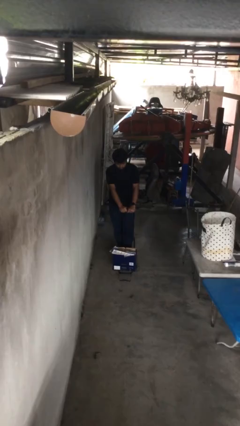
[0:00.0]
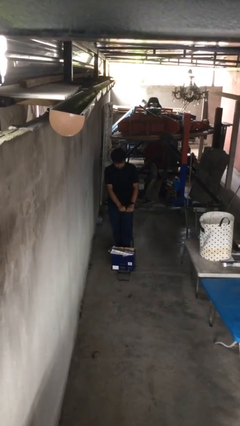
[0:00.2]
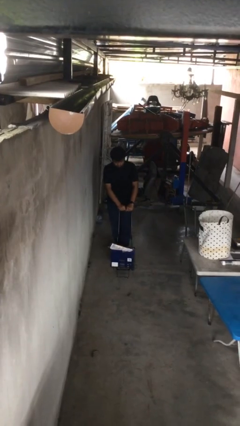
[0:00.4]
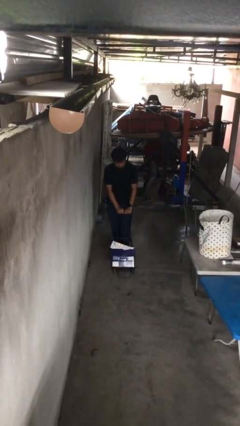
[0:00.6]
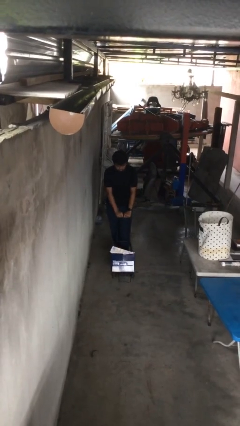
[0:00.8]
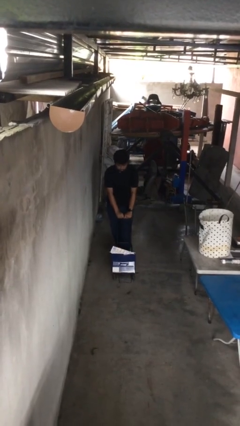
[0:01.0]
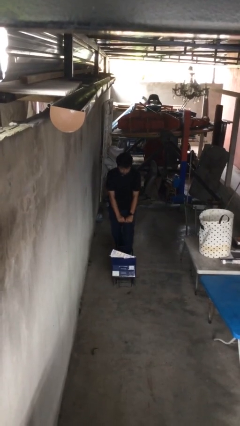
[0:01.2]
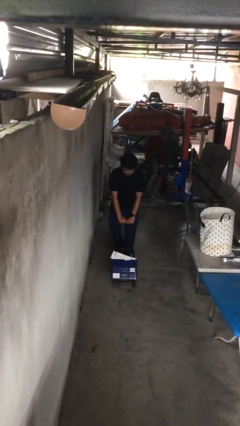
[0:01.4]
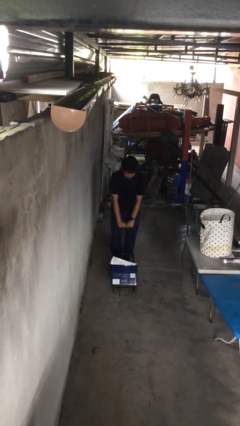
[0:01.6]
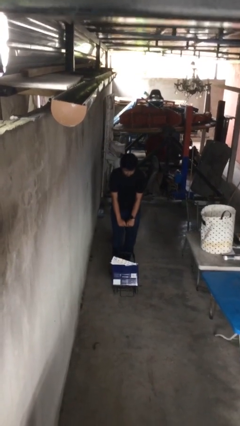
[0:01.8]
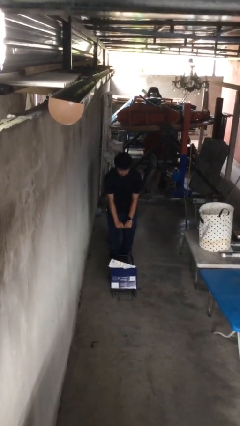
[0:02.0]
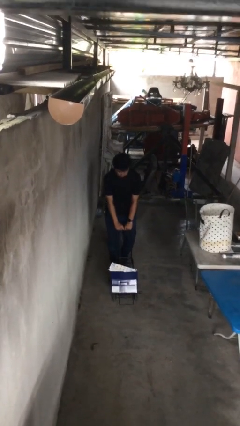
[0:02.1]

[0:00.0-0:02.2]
person pushes wheeled cart

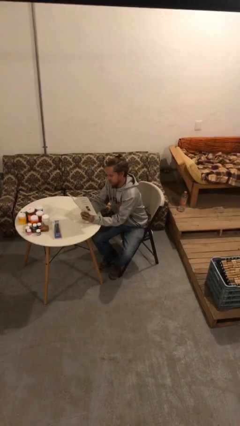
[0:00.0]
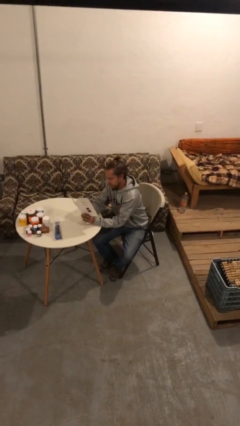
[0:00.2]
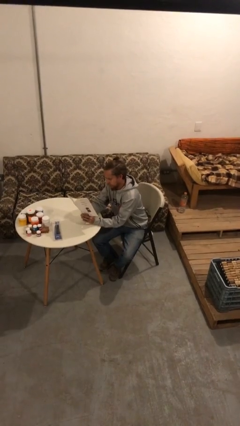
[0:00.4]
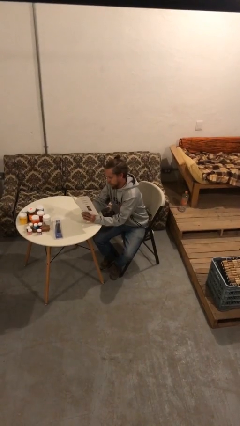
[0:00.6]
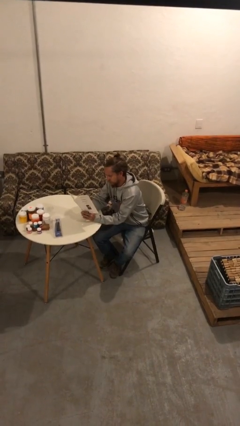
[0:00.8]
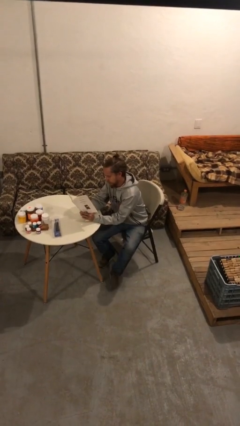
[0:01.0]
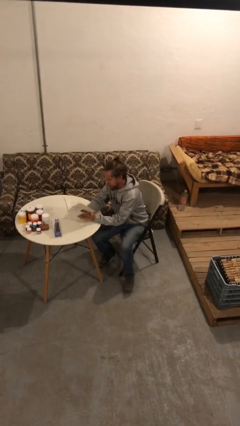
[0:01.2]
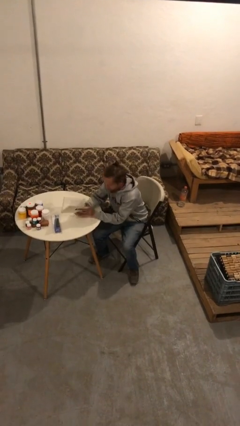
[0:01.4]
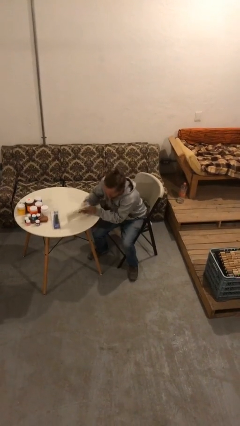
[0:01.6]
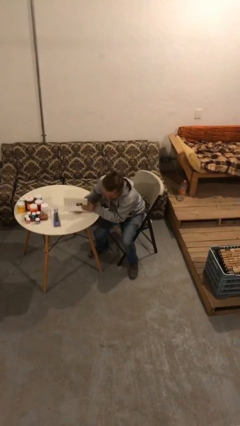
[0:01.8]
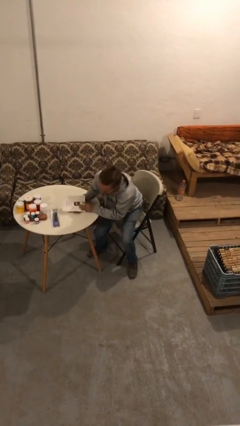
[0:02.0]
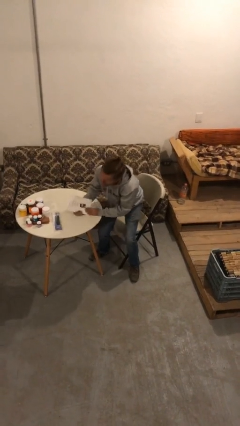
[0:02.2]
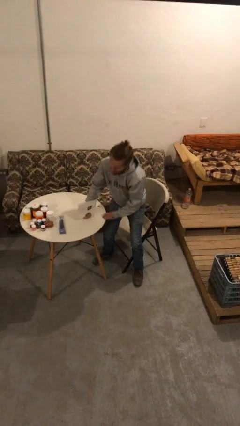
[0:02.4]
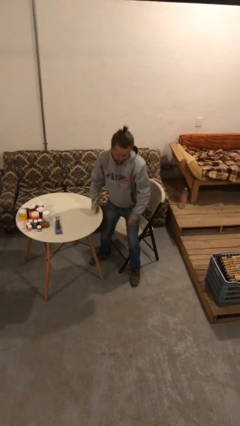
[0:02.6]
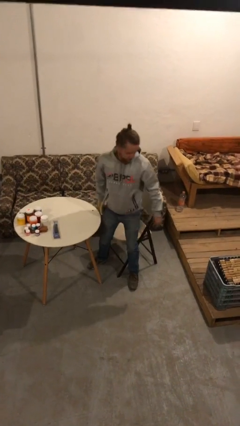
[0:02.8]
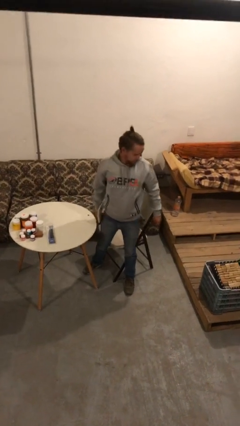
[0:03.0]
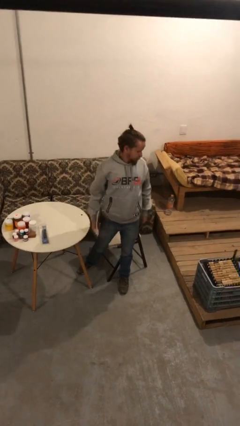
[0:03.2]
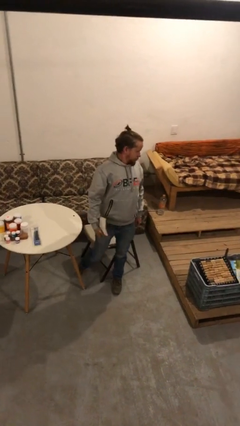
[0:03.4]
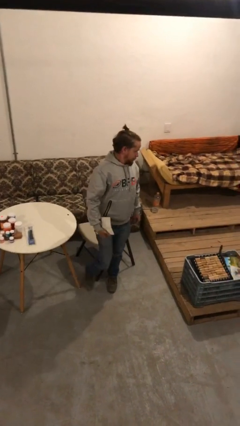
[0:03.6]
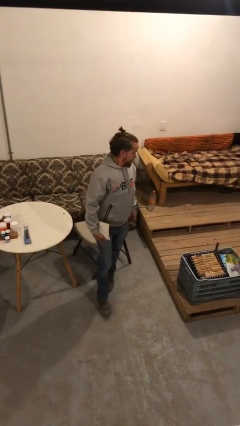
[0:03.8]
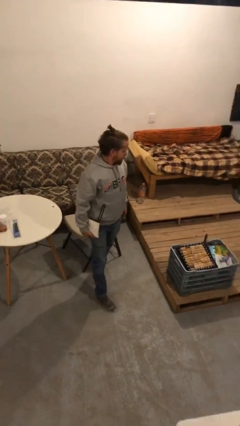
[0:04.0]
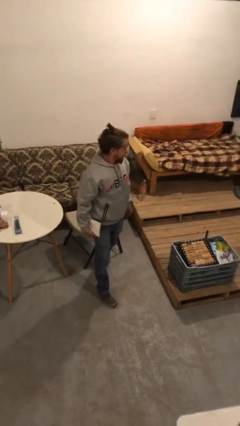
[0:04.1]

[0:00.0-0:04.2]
person stands up

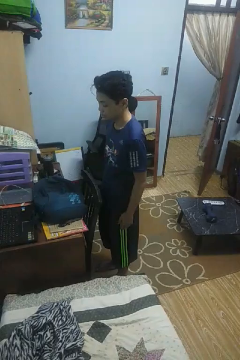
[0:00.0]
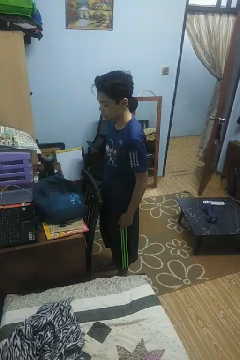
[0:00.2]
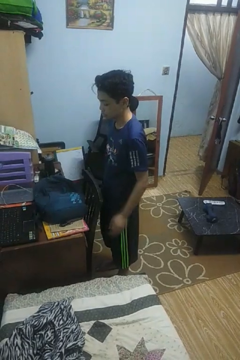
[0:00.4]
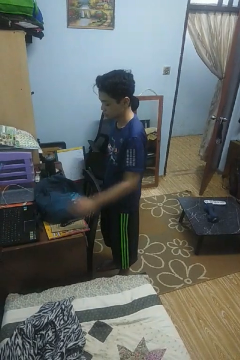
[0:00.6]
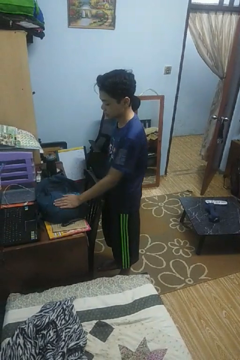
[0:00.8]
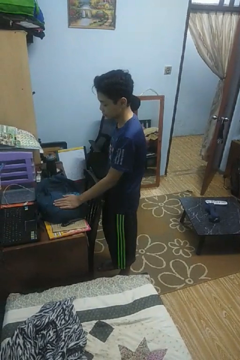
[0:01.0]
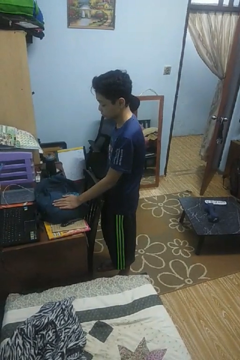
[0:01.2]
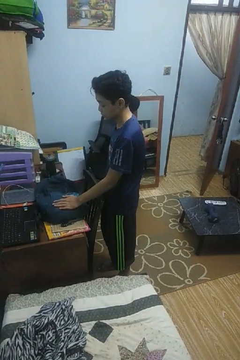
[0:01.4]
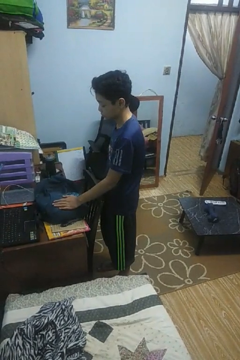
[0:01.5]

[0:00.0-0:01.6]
person taps object with finger

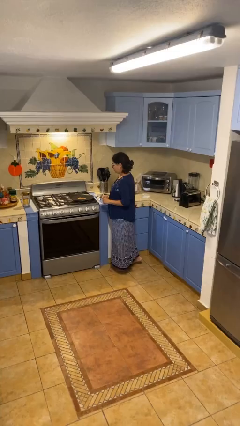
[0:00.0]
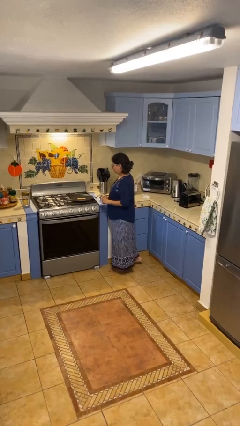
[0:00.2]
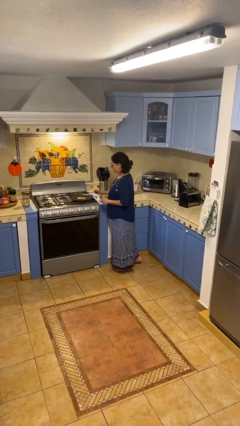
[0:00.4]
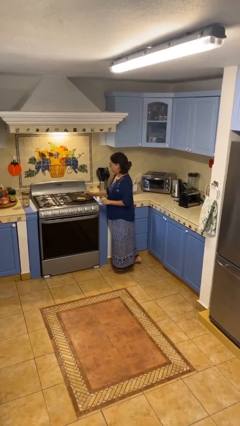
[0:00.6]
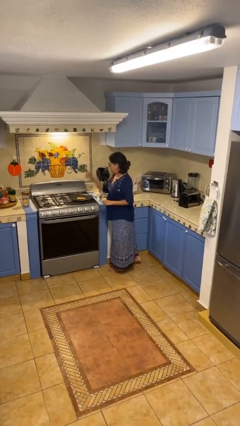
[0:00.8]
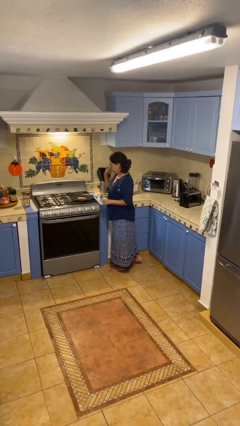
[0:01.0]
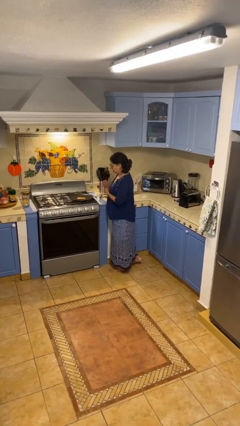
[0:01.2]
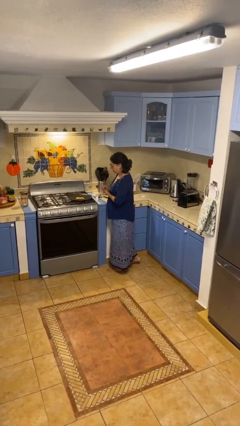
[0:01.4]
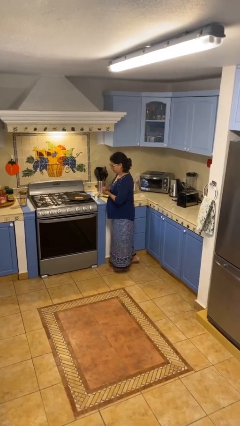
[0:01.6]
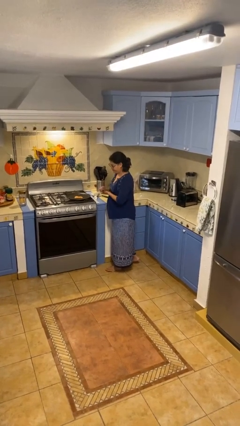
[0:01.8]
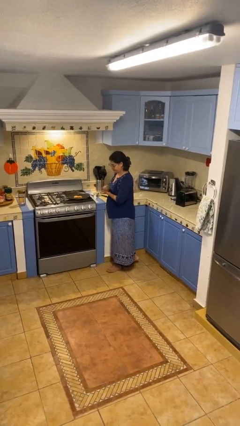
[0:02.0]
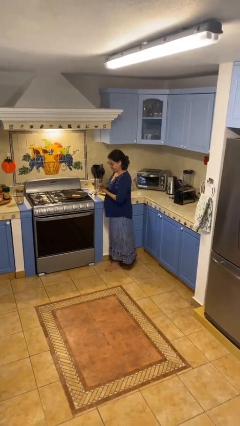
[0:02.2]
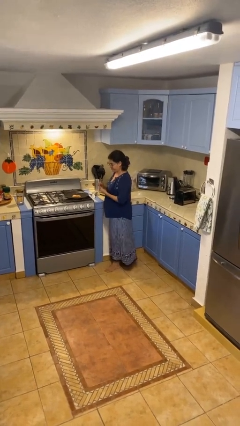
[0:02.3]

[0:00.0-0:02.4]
person burns hand

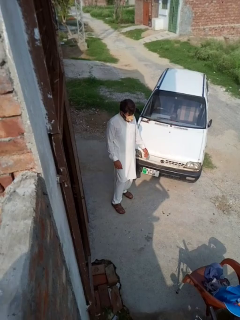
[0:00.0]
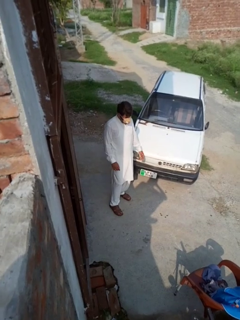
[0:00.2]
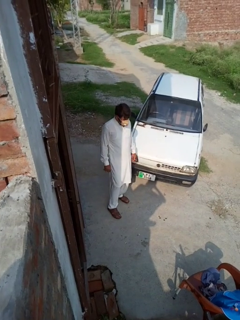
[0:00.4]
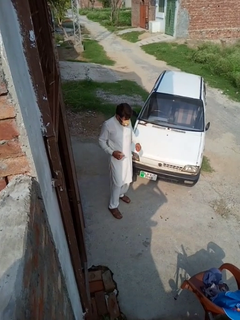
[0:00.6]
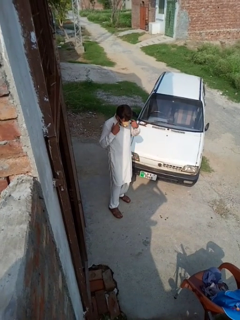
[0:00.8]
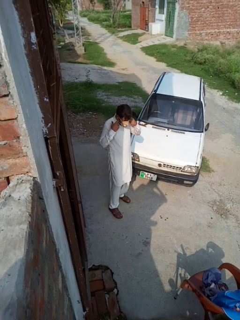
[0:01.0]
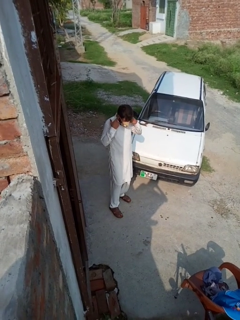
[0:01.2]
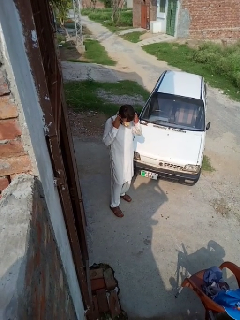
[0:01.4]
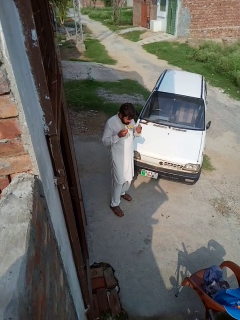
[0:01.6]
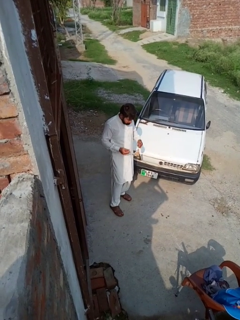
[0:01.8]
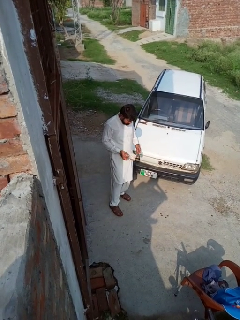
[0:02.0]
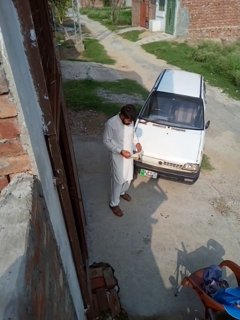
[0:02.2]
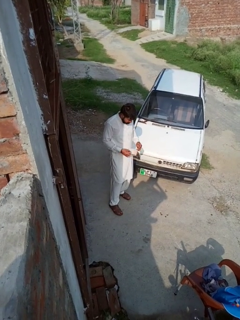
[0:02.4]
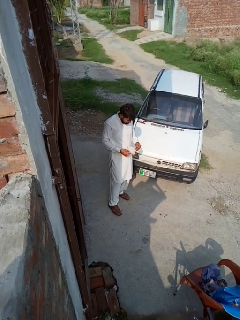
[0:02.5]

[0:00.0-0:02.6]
person takes off facemask

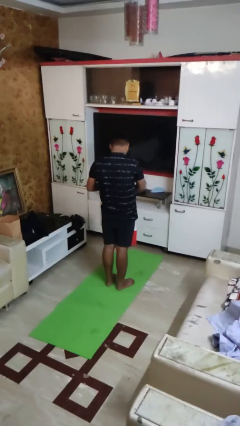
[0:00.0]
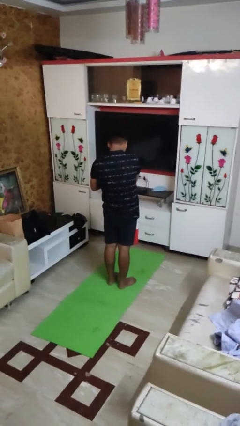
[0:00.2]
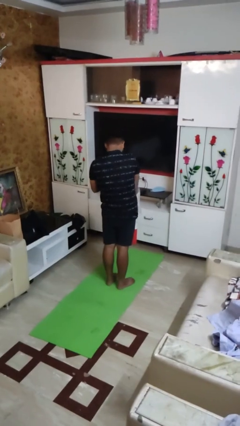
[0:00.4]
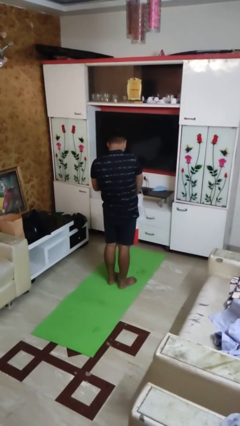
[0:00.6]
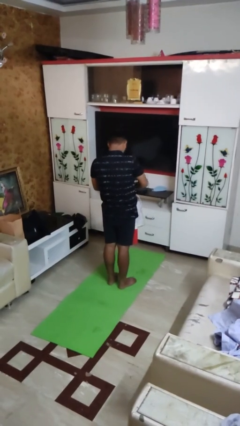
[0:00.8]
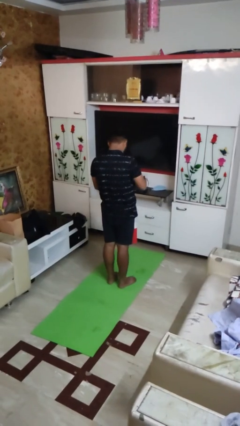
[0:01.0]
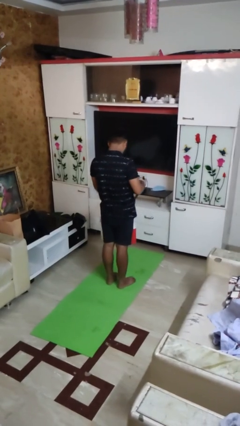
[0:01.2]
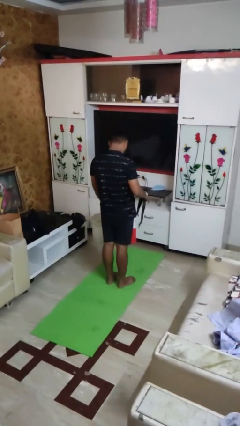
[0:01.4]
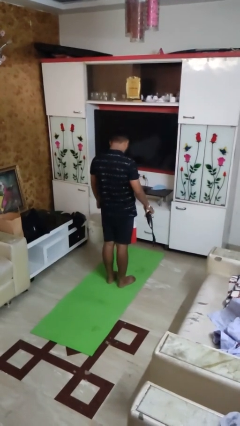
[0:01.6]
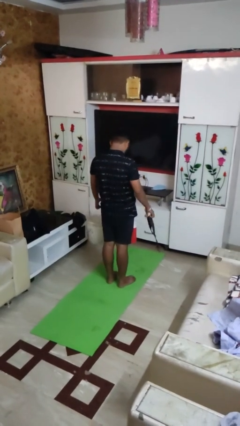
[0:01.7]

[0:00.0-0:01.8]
person takes object from basket

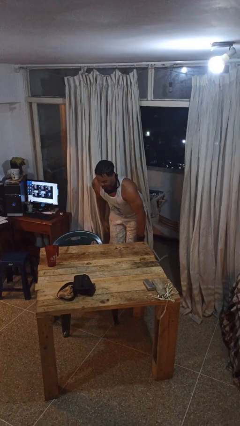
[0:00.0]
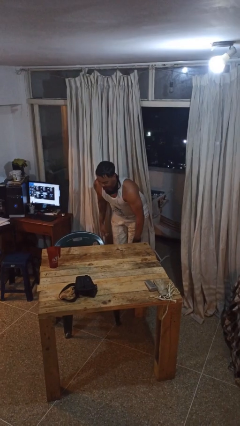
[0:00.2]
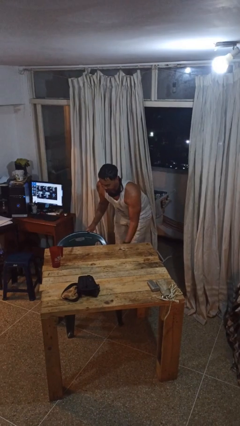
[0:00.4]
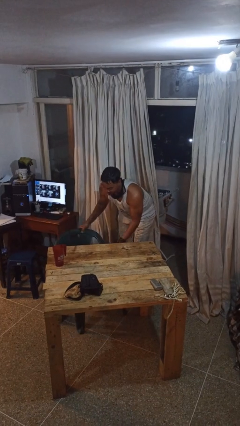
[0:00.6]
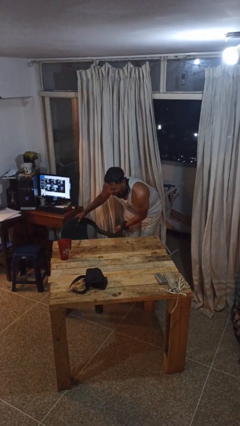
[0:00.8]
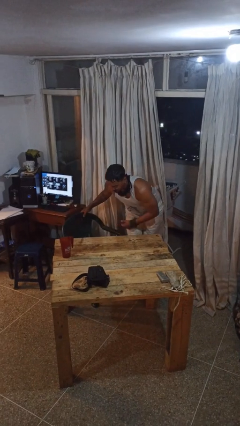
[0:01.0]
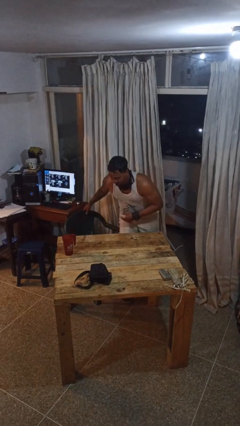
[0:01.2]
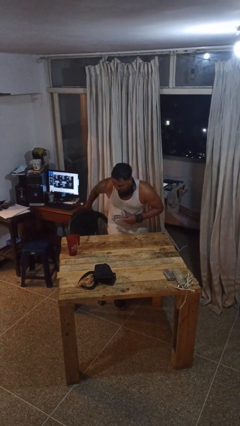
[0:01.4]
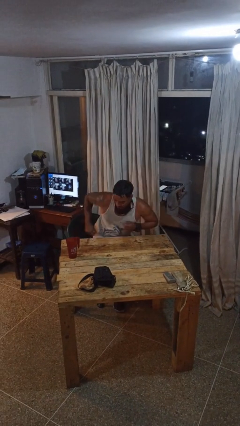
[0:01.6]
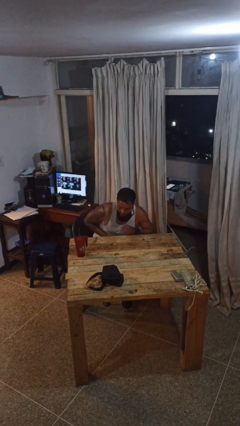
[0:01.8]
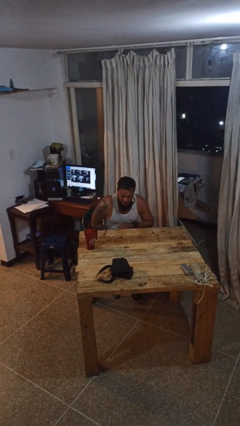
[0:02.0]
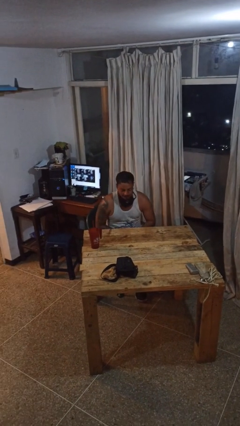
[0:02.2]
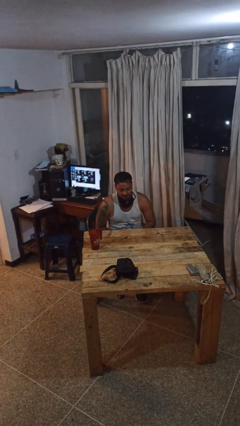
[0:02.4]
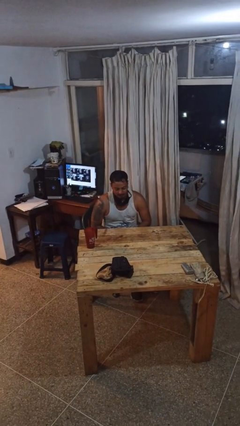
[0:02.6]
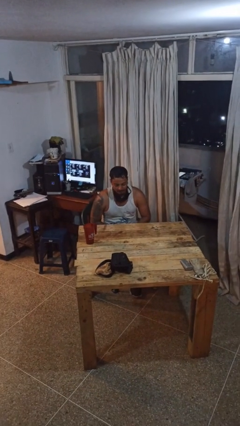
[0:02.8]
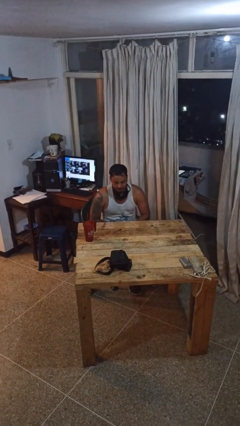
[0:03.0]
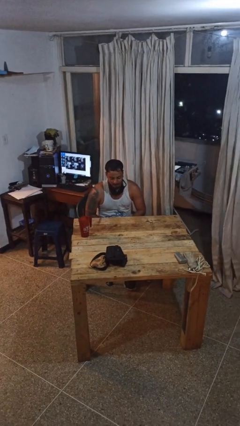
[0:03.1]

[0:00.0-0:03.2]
person sits down
